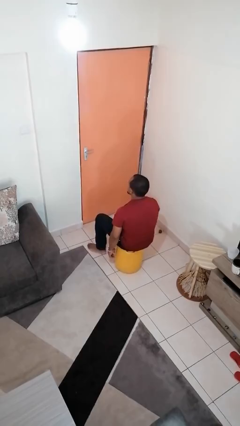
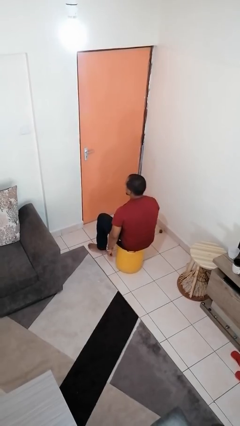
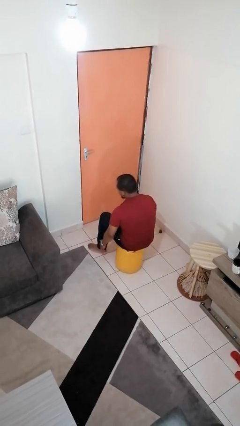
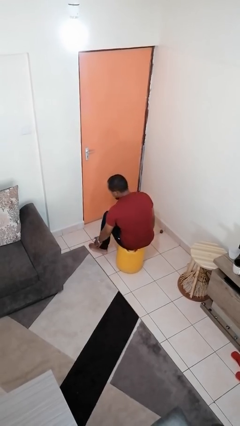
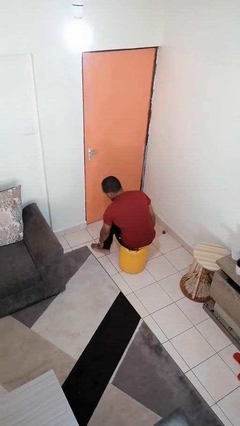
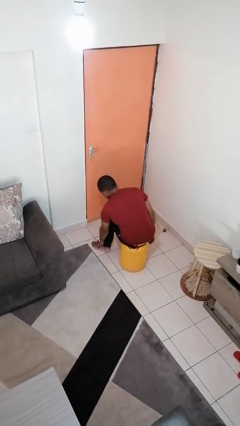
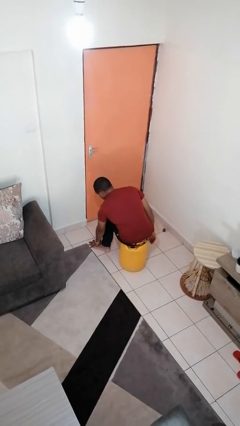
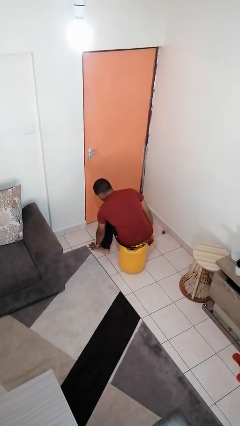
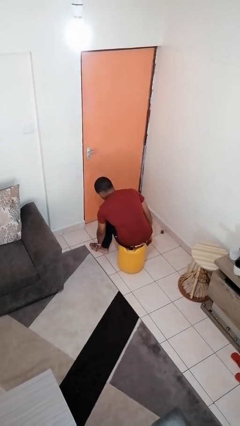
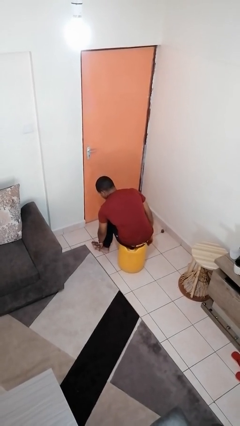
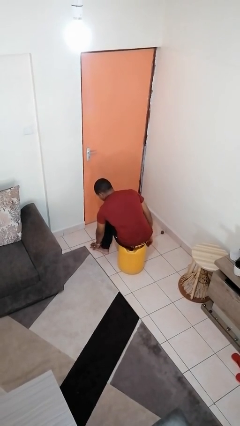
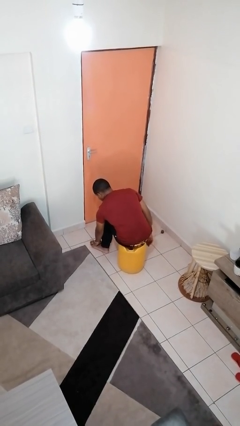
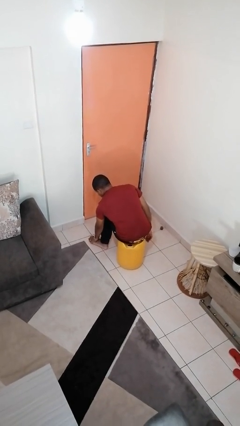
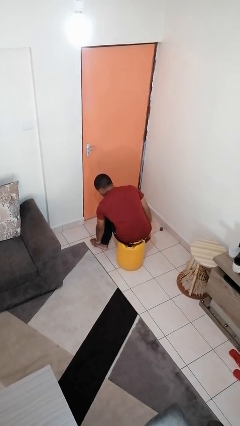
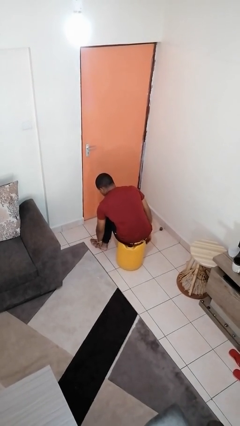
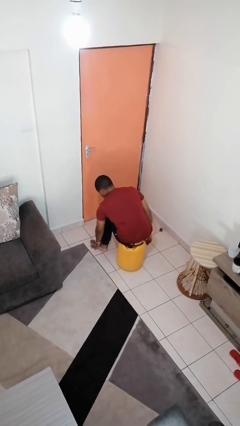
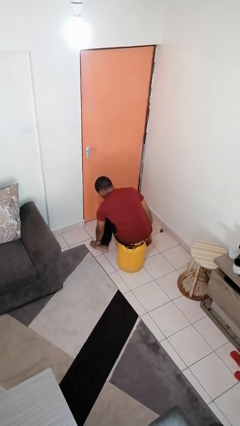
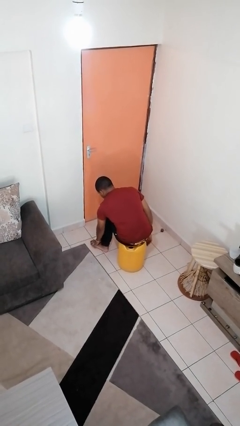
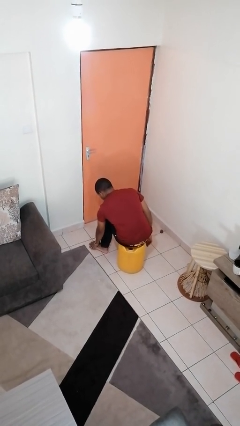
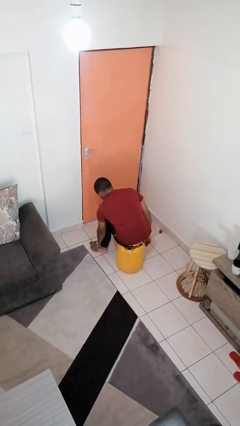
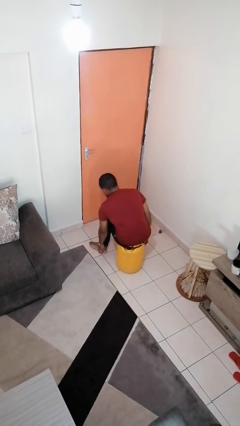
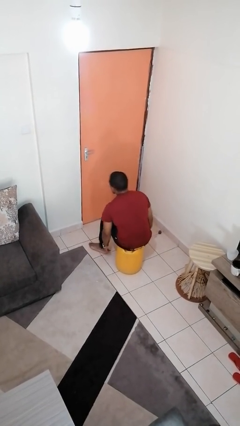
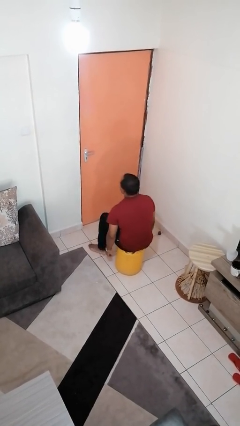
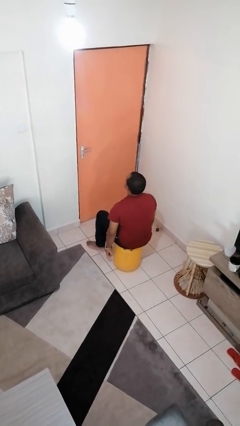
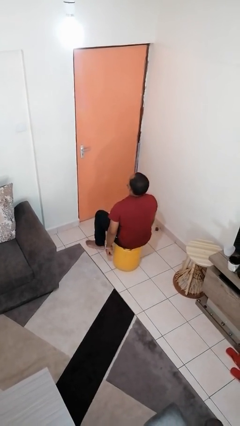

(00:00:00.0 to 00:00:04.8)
person rubs foot

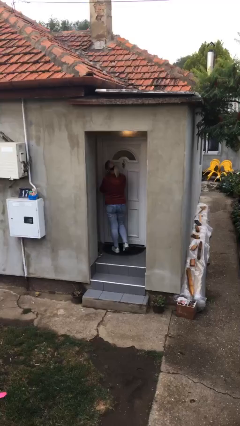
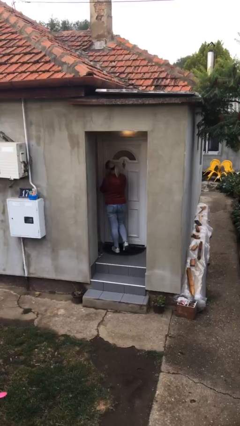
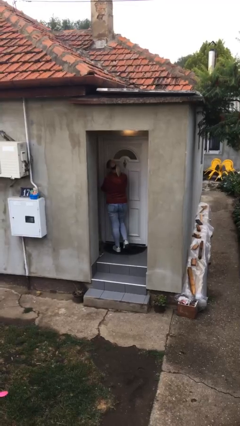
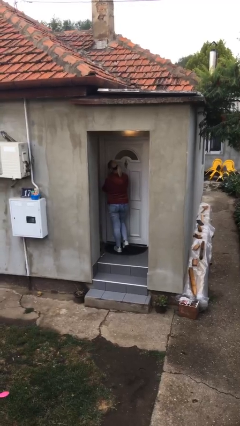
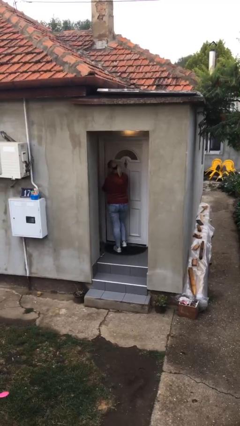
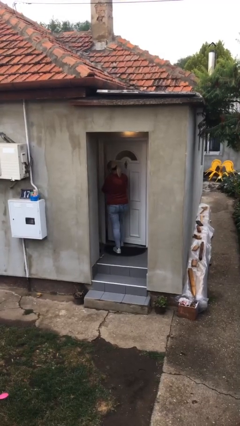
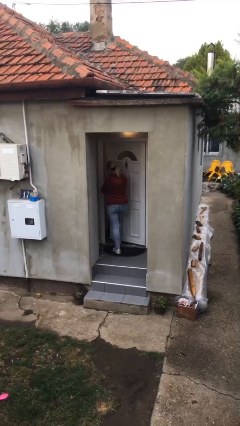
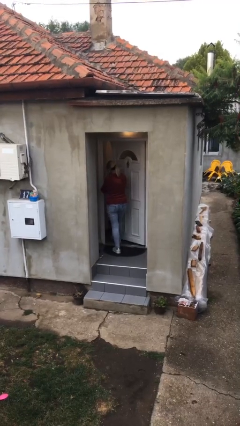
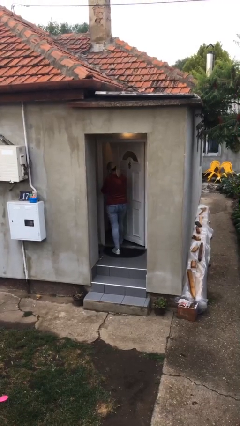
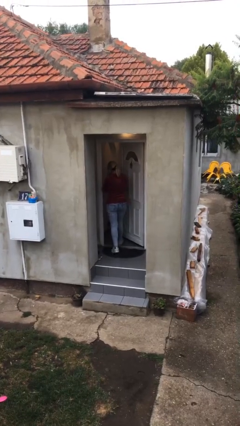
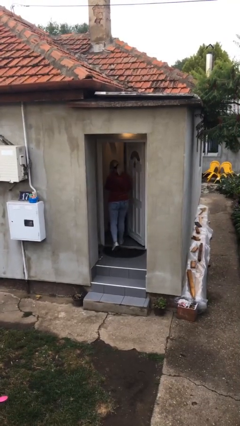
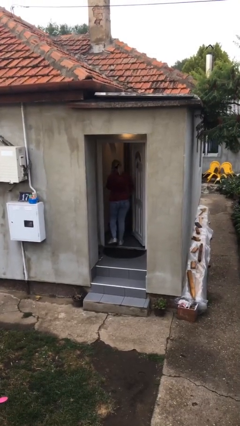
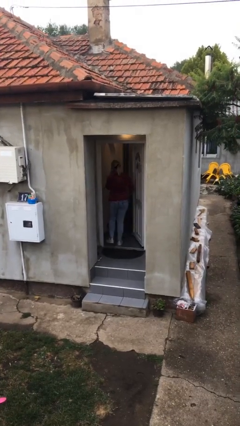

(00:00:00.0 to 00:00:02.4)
person opens facility door

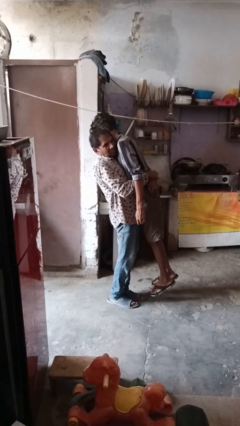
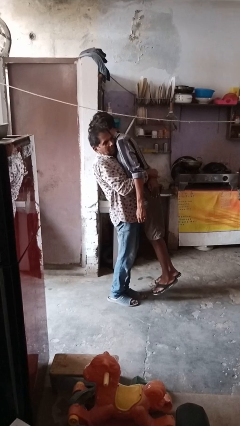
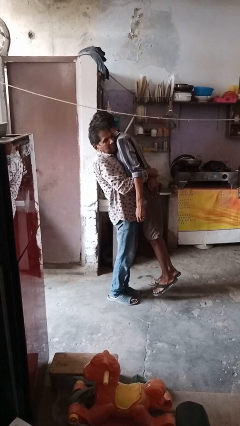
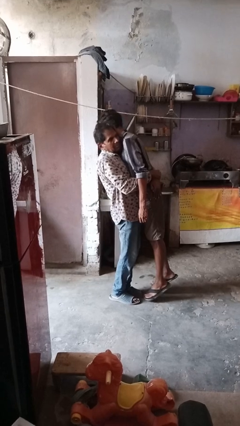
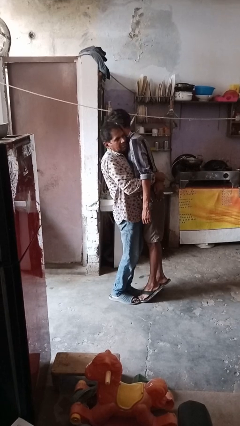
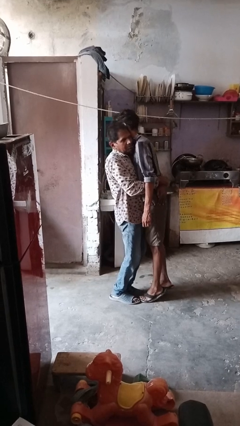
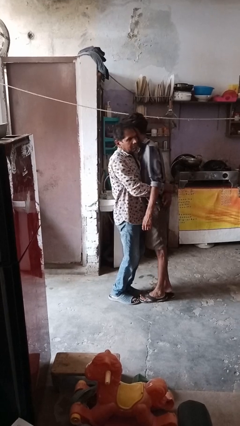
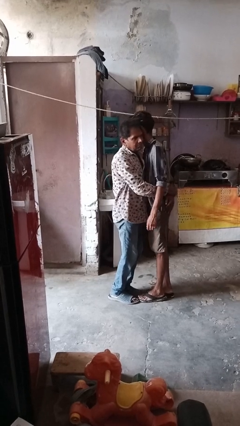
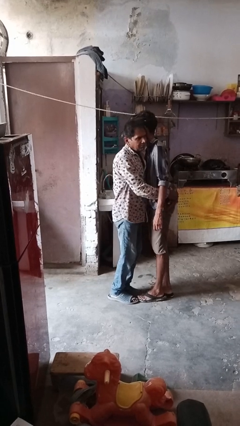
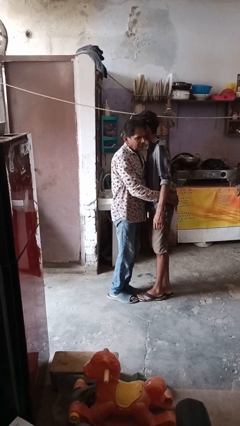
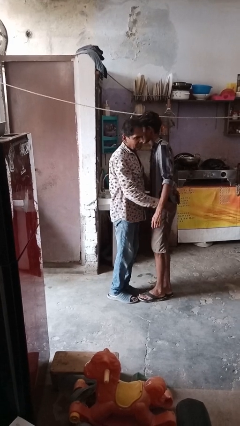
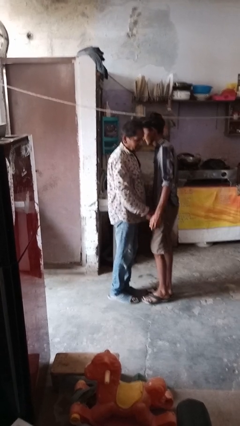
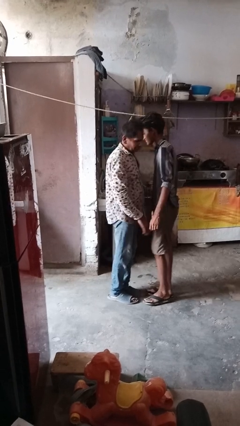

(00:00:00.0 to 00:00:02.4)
person puts down person

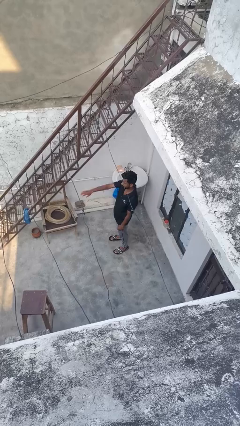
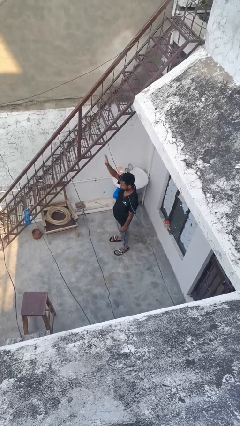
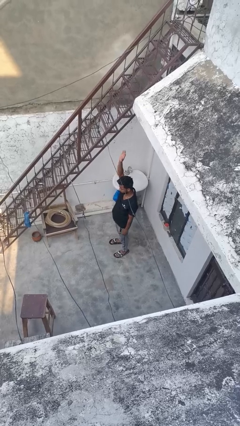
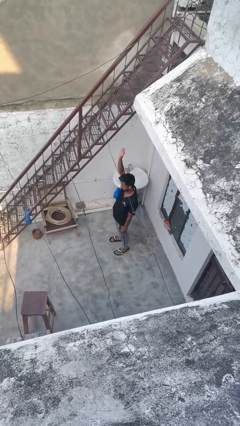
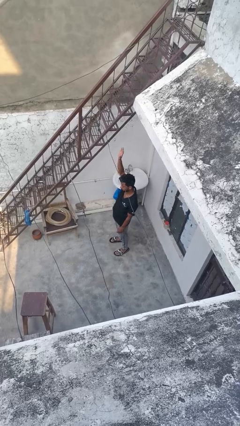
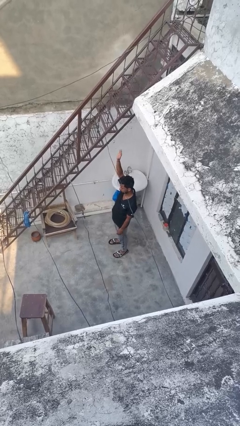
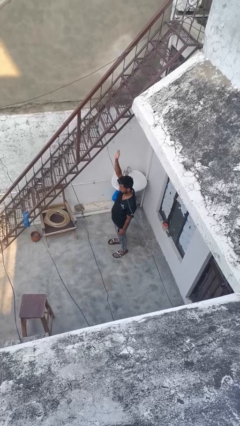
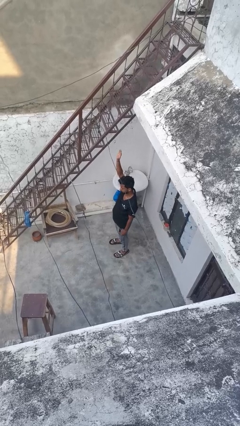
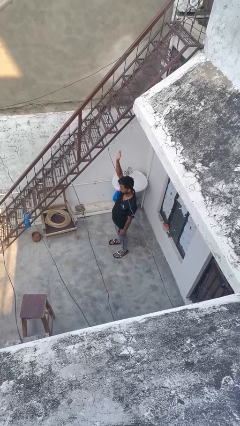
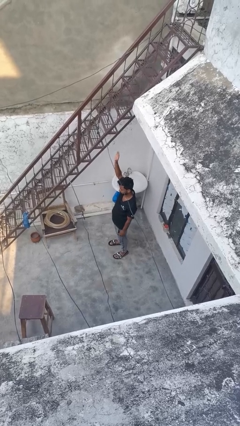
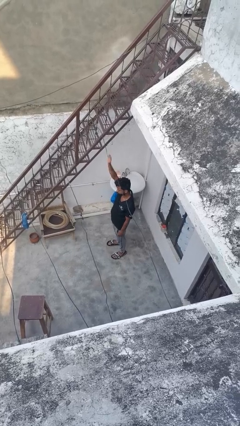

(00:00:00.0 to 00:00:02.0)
person gestures swipe up

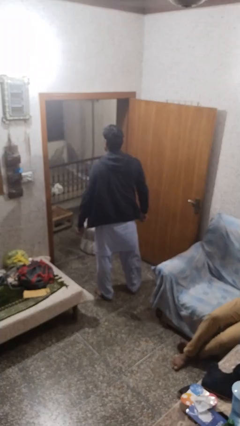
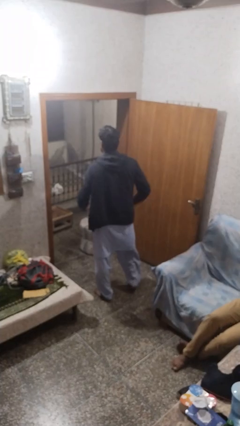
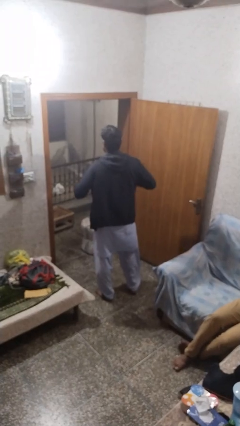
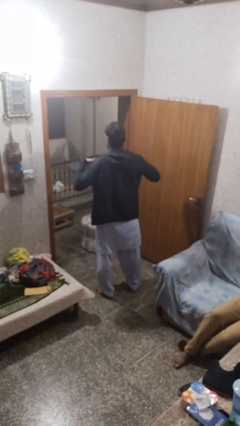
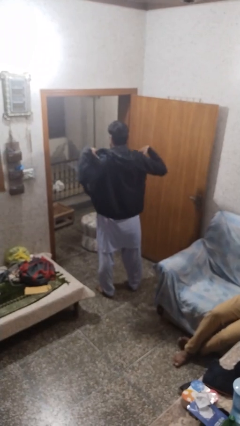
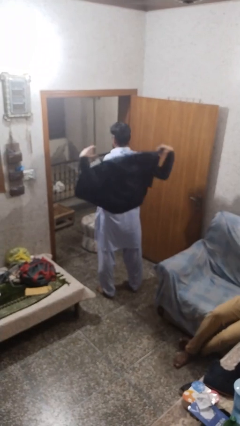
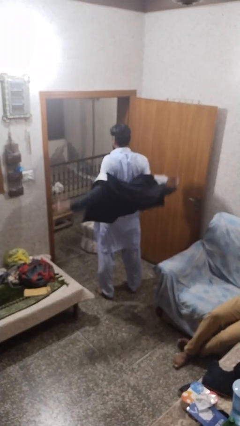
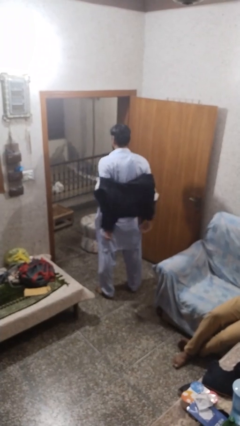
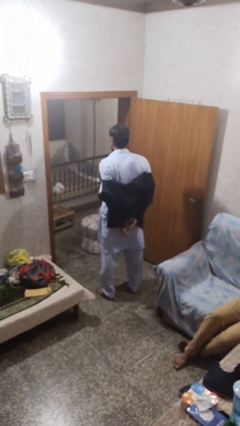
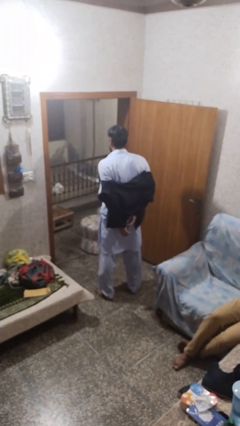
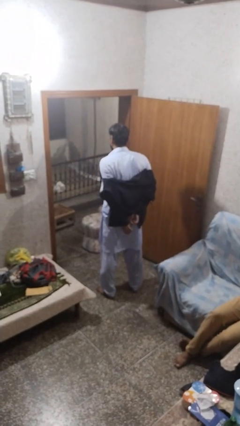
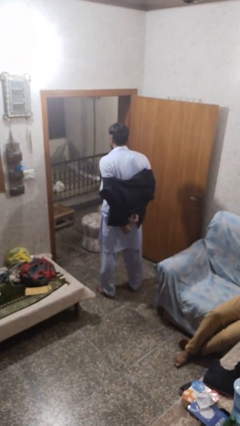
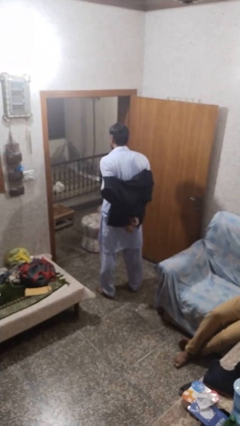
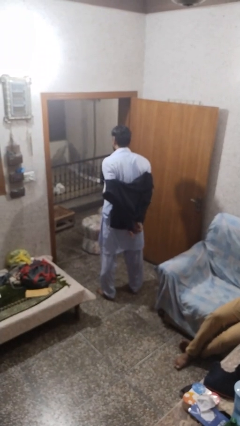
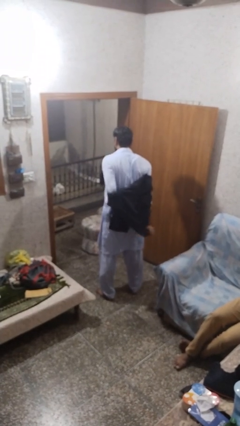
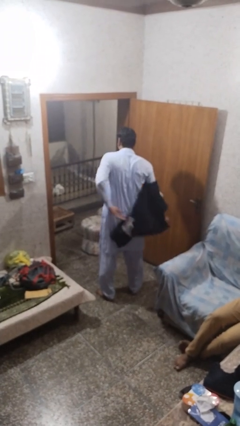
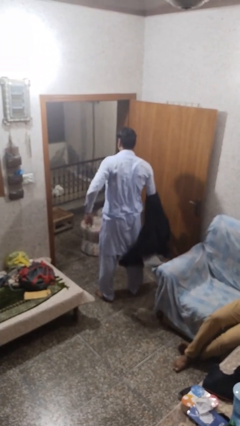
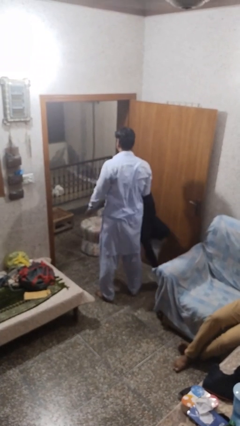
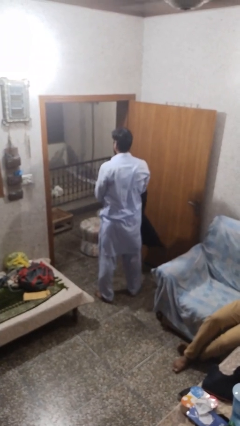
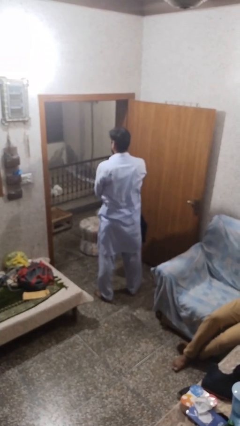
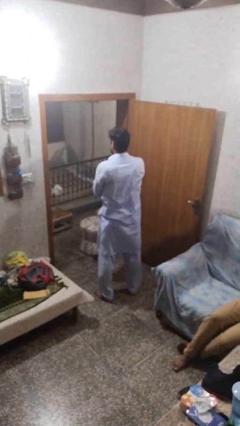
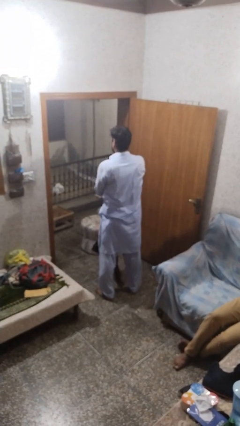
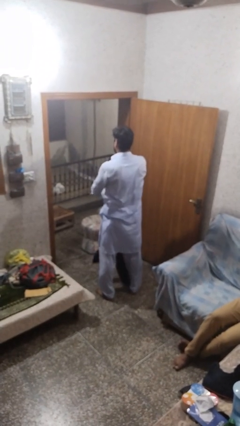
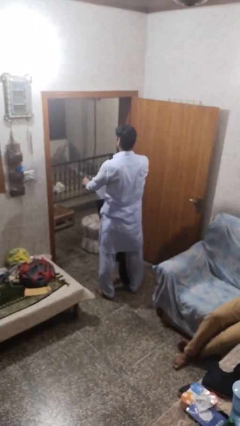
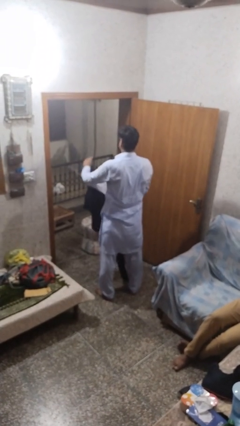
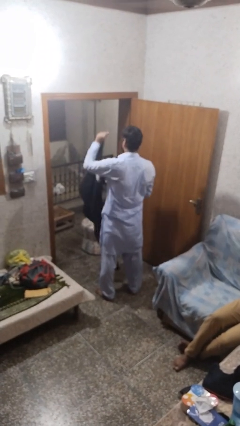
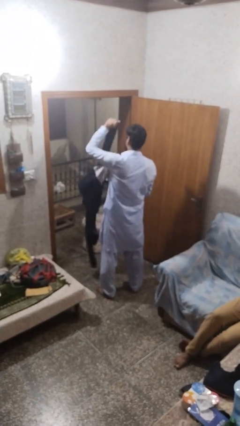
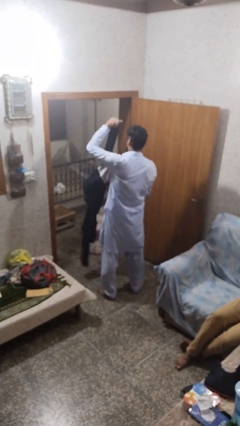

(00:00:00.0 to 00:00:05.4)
person takes off jacket

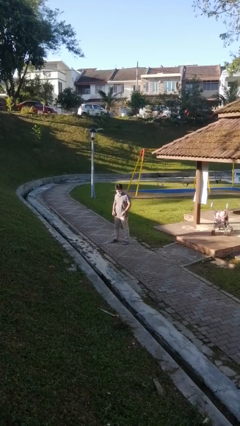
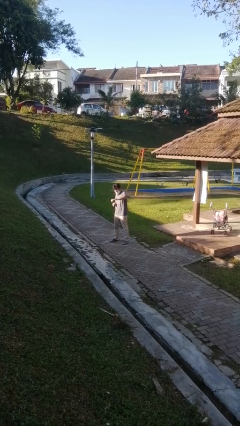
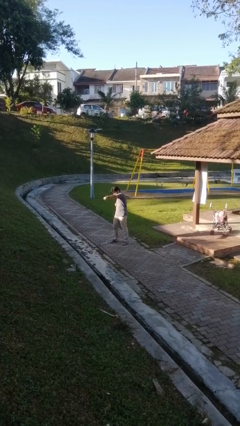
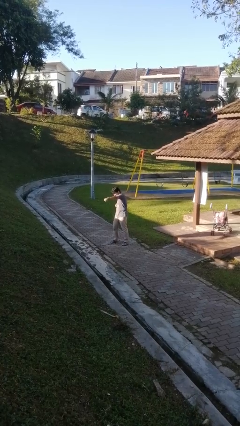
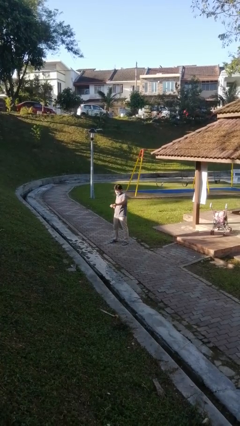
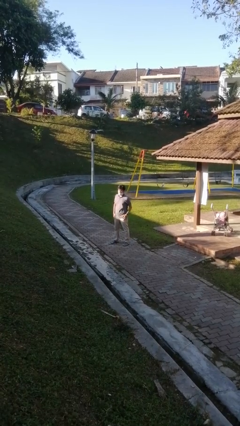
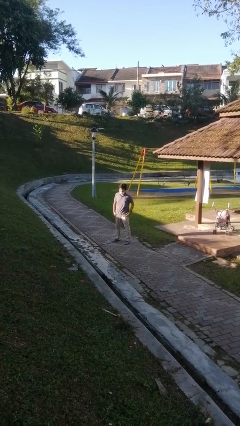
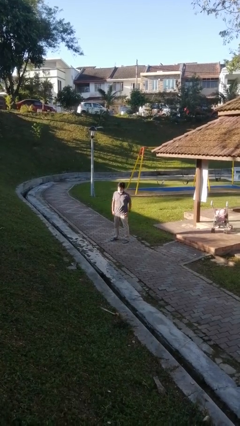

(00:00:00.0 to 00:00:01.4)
person punches
